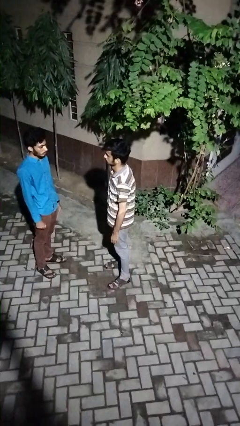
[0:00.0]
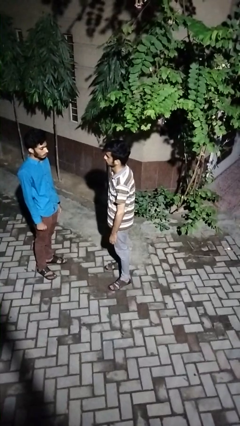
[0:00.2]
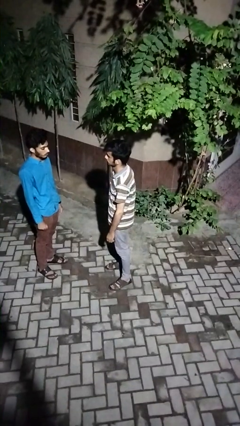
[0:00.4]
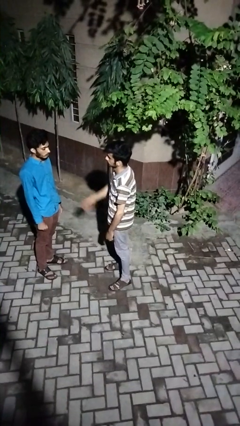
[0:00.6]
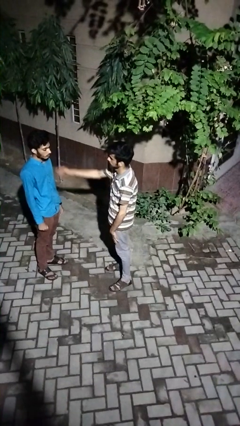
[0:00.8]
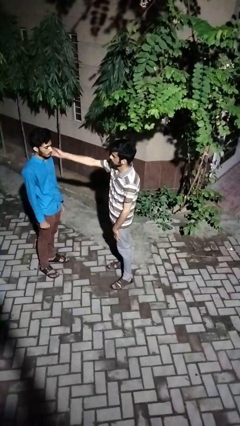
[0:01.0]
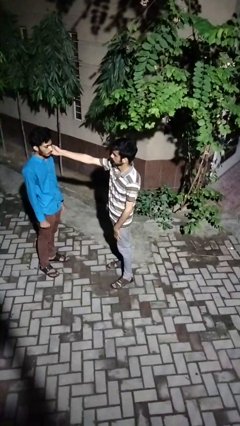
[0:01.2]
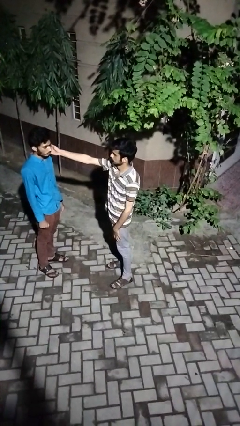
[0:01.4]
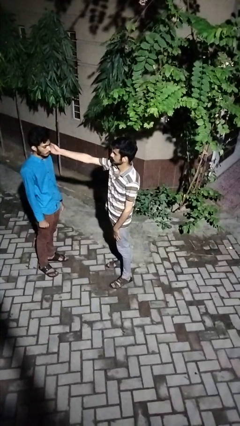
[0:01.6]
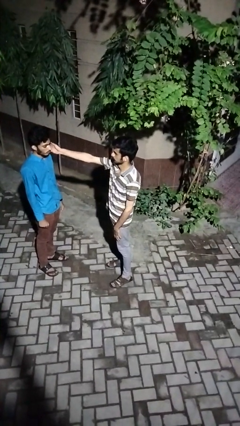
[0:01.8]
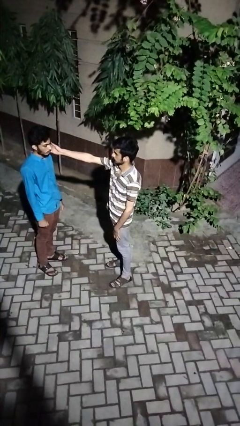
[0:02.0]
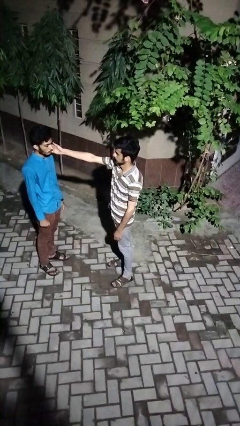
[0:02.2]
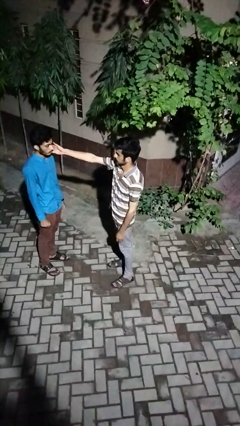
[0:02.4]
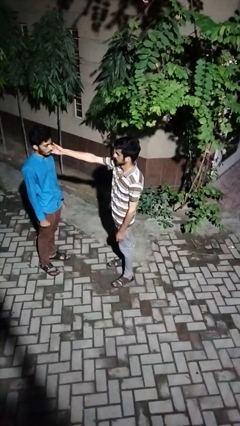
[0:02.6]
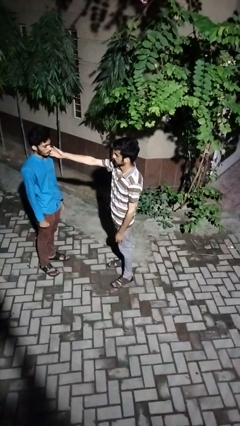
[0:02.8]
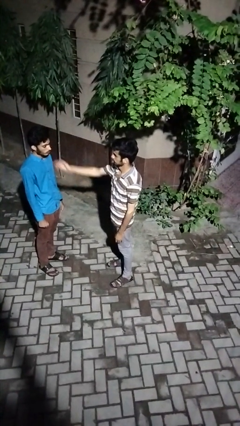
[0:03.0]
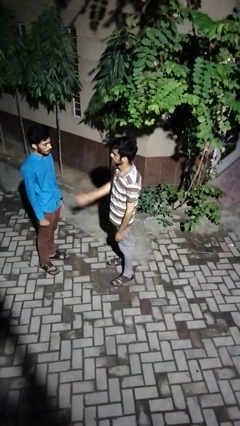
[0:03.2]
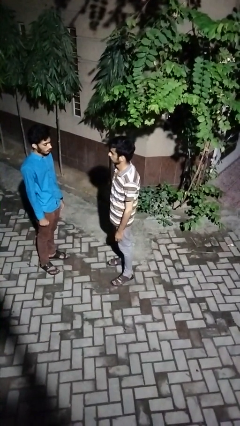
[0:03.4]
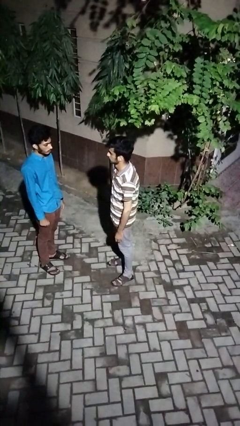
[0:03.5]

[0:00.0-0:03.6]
person touches face of person

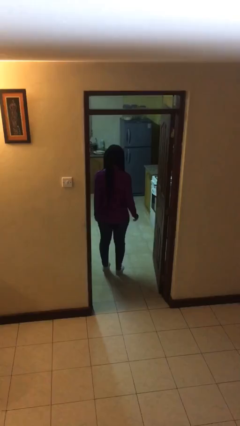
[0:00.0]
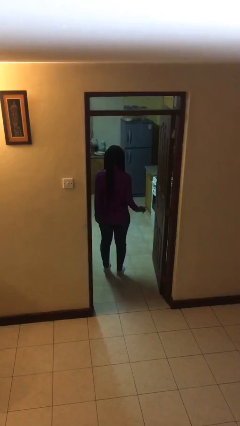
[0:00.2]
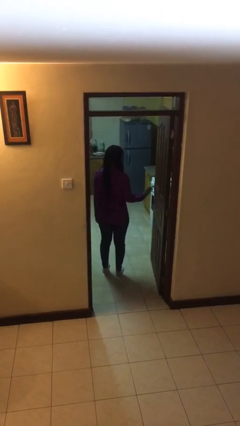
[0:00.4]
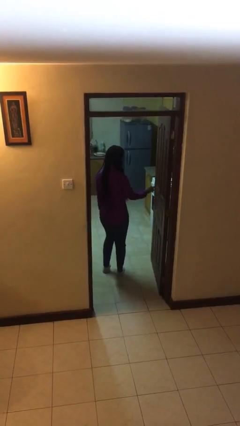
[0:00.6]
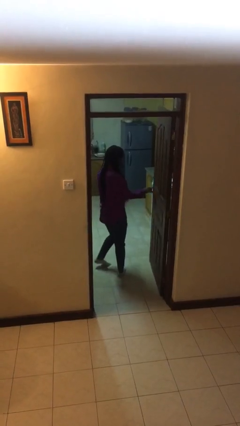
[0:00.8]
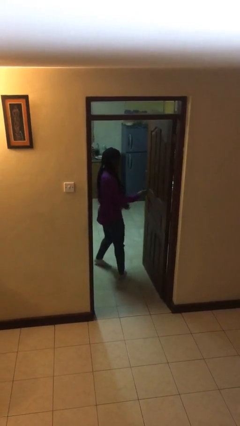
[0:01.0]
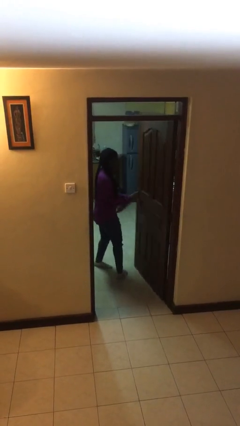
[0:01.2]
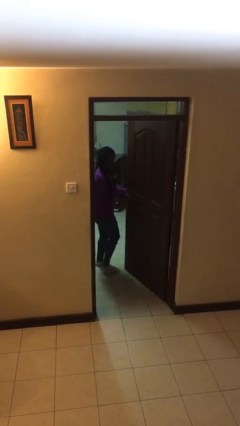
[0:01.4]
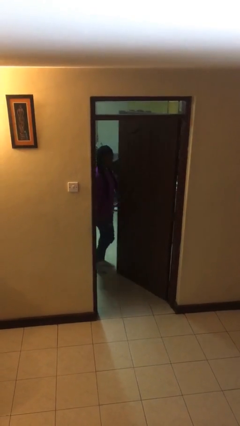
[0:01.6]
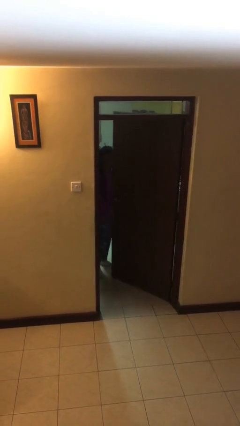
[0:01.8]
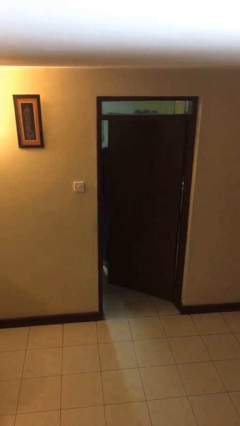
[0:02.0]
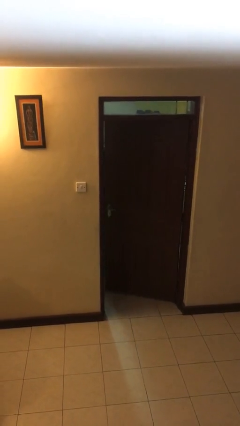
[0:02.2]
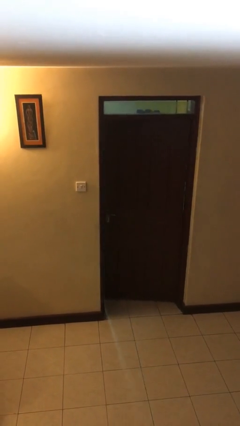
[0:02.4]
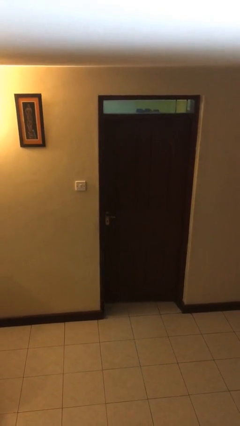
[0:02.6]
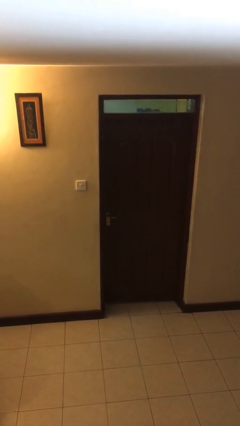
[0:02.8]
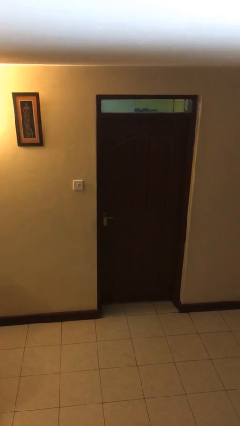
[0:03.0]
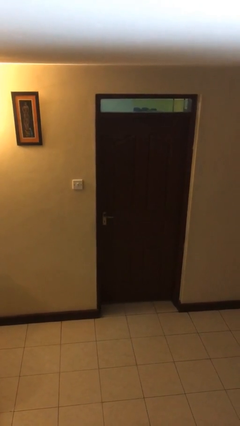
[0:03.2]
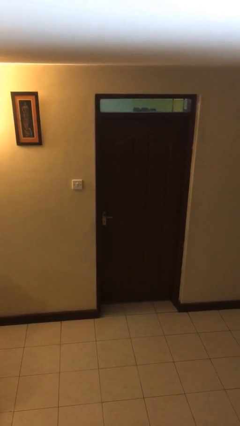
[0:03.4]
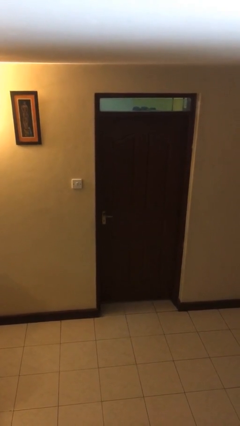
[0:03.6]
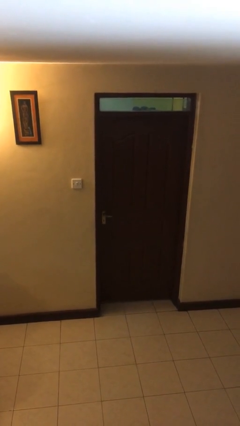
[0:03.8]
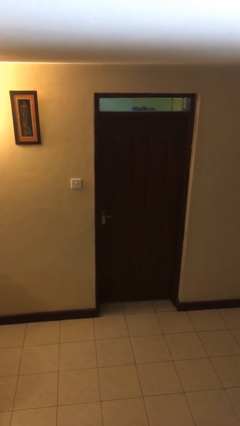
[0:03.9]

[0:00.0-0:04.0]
person closes facility door

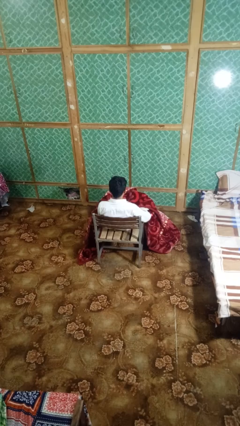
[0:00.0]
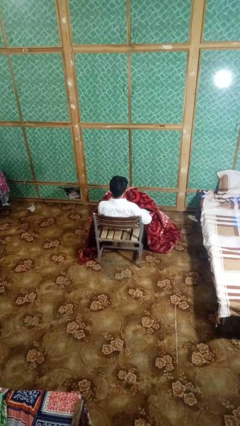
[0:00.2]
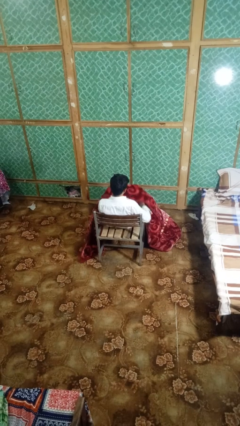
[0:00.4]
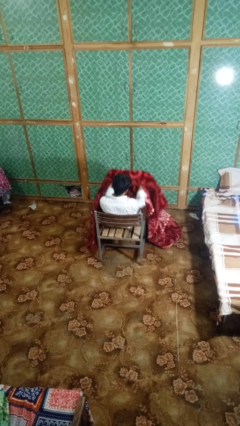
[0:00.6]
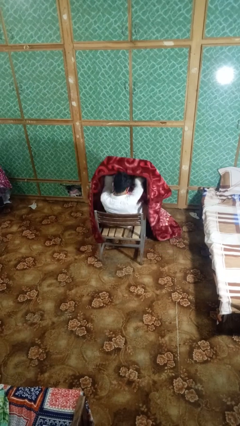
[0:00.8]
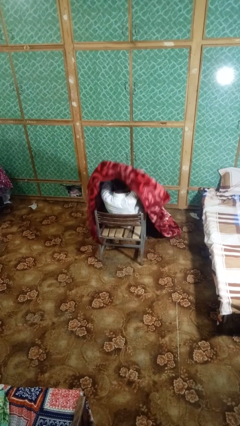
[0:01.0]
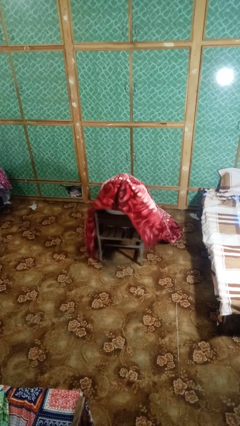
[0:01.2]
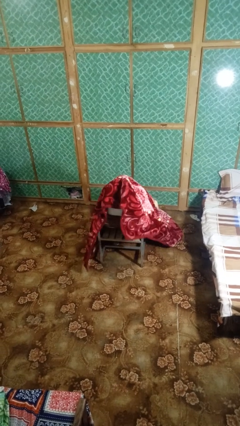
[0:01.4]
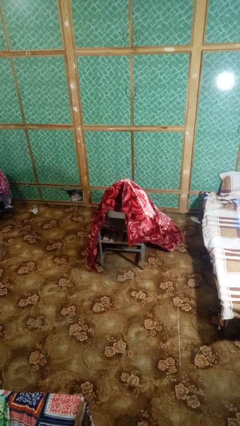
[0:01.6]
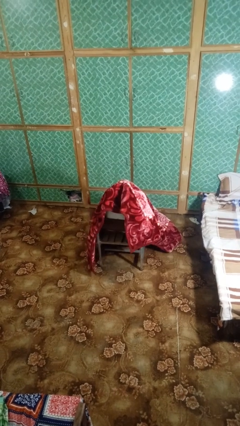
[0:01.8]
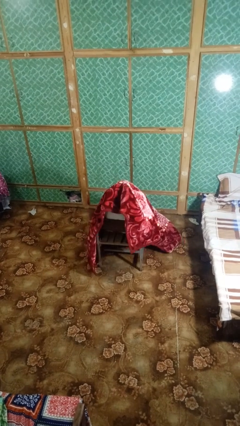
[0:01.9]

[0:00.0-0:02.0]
person covers with blanket

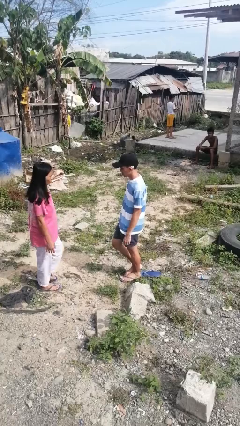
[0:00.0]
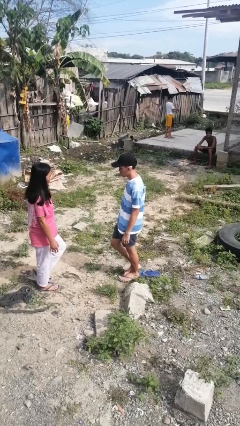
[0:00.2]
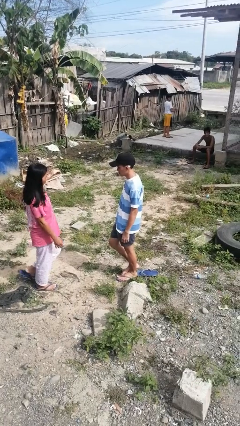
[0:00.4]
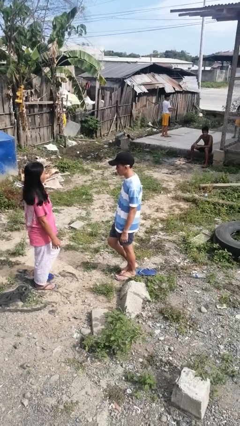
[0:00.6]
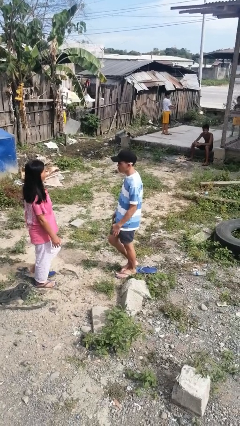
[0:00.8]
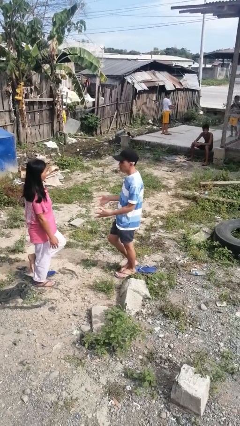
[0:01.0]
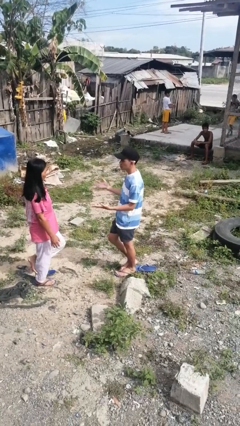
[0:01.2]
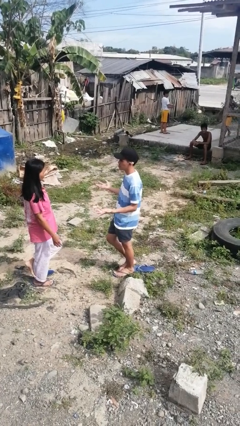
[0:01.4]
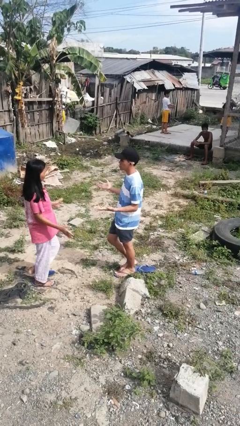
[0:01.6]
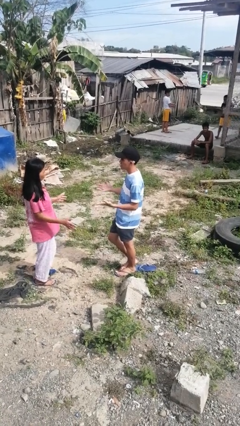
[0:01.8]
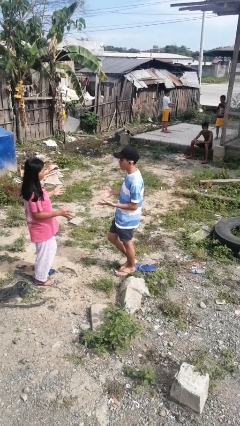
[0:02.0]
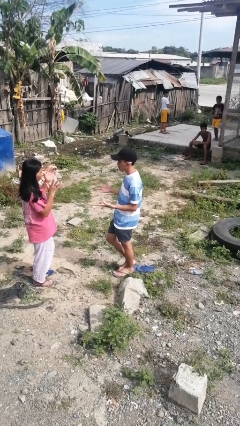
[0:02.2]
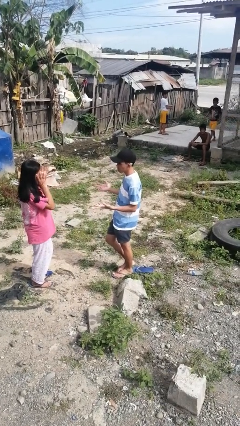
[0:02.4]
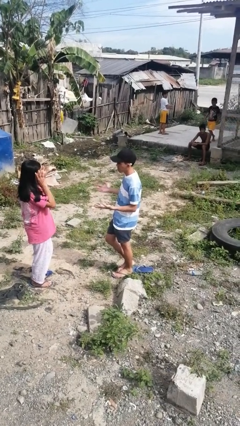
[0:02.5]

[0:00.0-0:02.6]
person talks to person

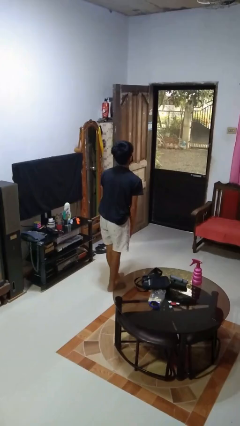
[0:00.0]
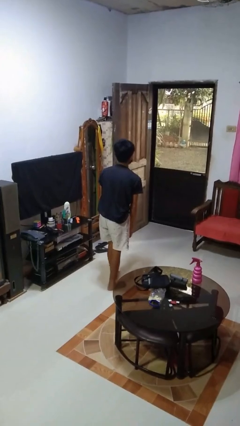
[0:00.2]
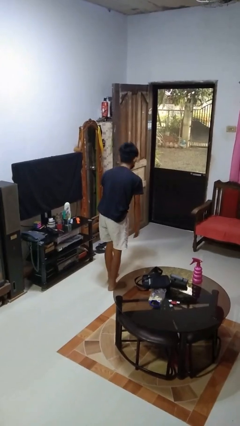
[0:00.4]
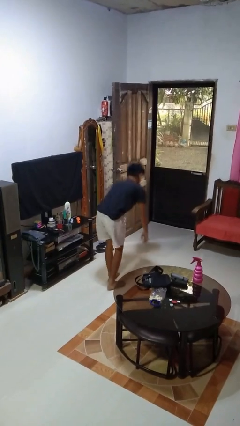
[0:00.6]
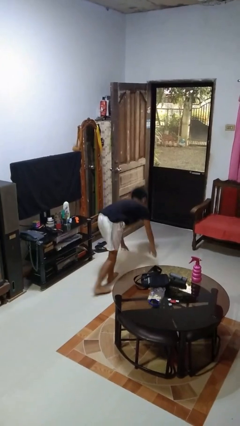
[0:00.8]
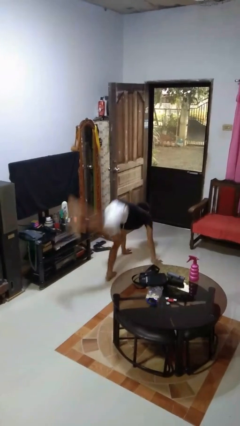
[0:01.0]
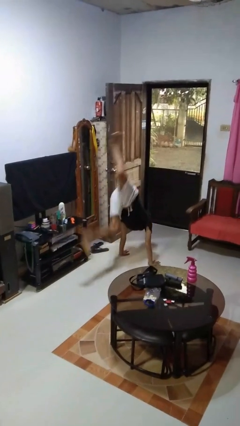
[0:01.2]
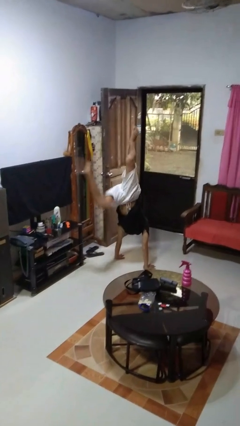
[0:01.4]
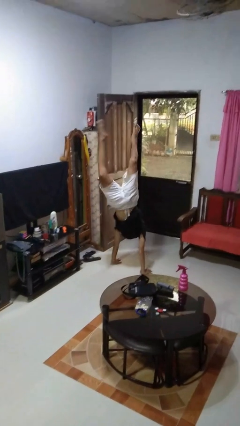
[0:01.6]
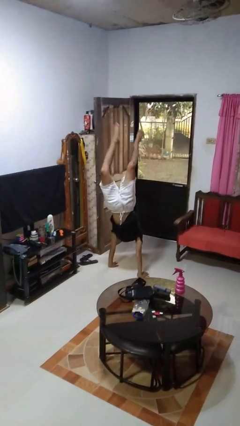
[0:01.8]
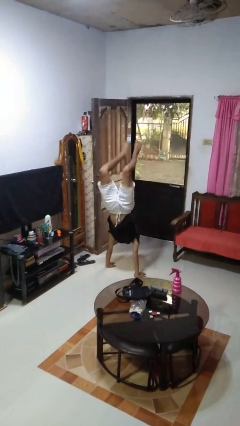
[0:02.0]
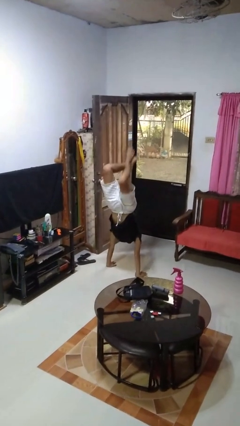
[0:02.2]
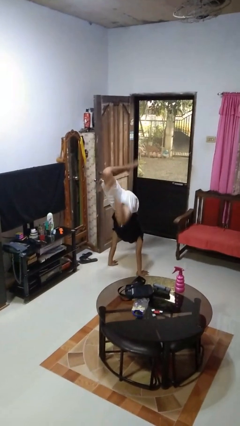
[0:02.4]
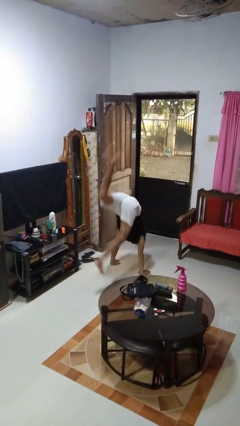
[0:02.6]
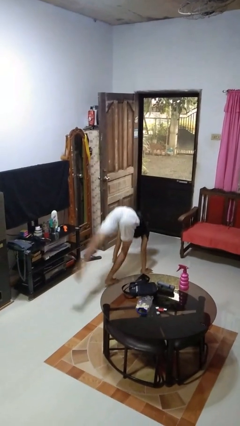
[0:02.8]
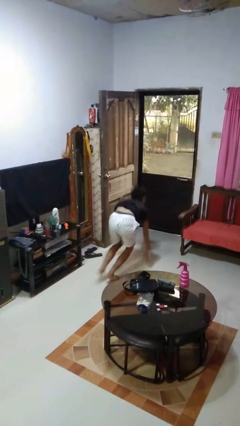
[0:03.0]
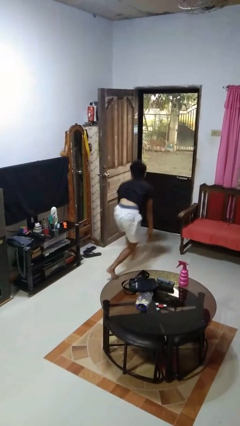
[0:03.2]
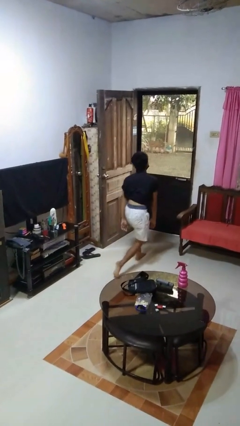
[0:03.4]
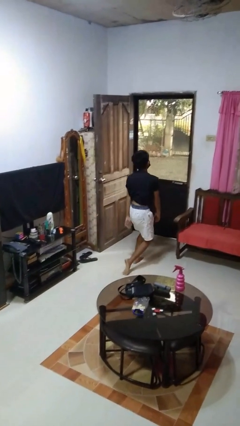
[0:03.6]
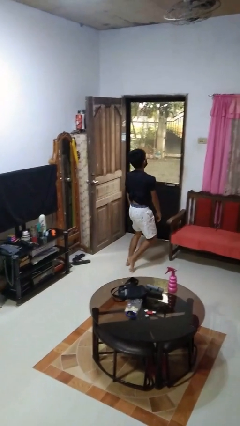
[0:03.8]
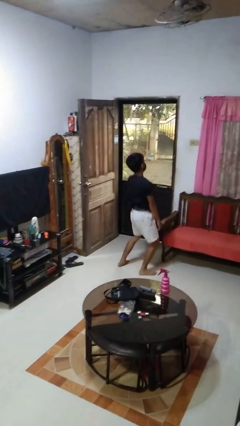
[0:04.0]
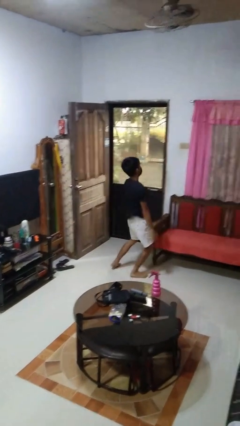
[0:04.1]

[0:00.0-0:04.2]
person handstand

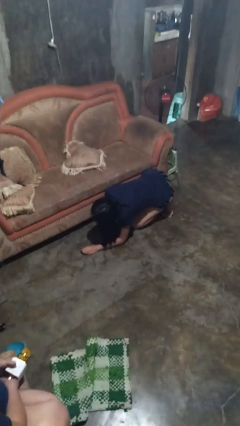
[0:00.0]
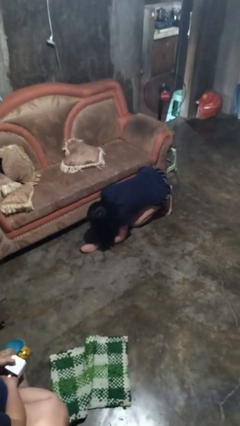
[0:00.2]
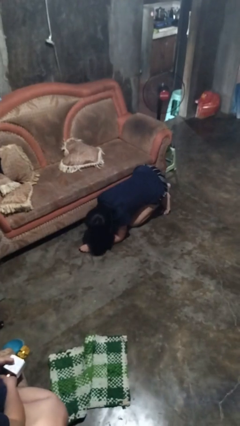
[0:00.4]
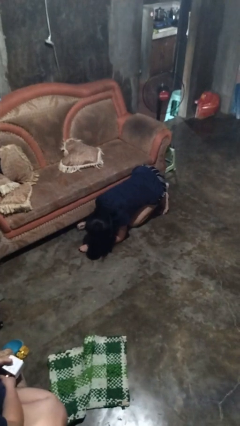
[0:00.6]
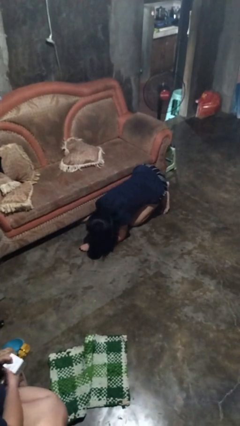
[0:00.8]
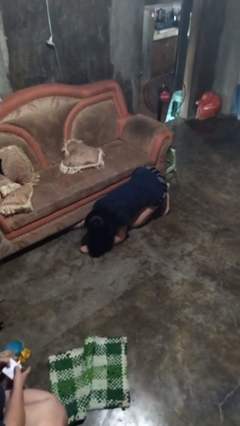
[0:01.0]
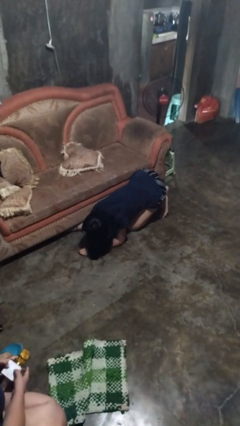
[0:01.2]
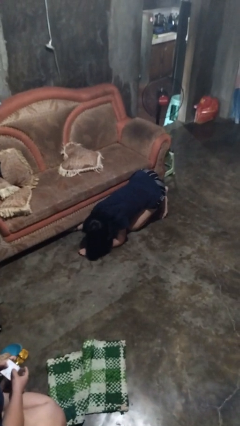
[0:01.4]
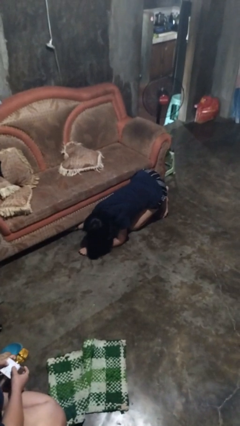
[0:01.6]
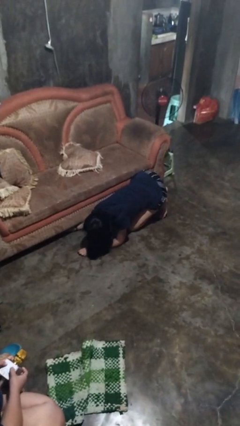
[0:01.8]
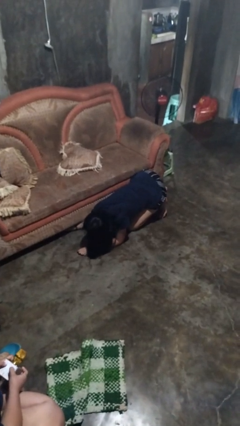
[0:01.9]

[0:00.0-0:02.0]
person searches under couch
